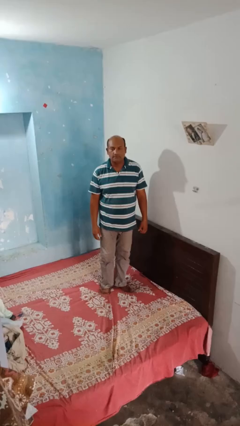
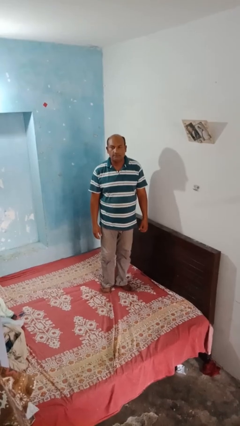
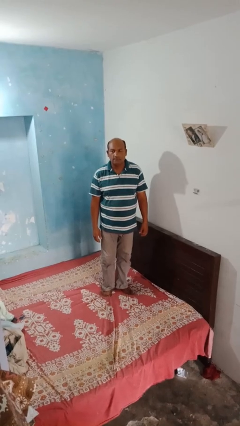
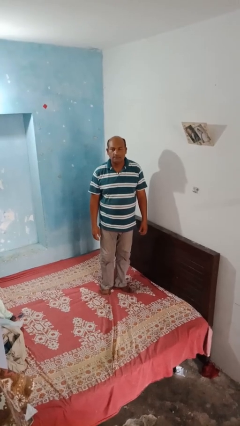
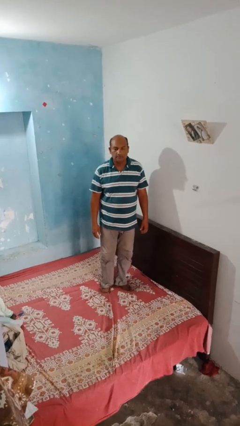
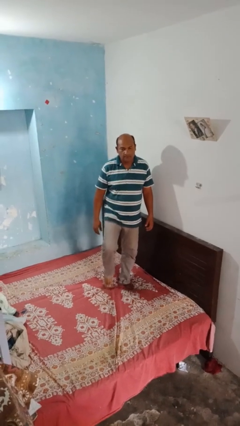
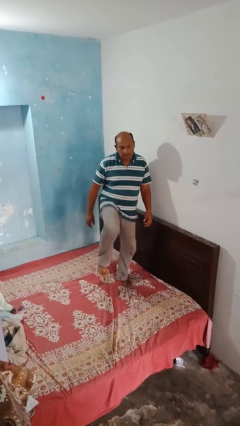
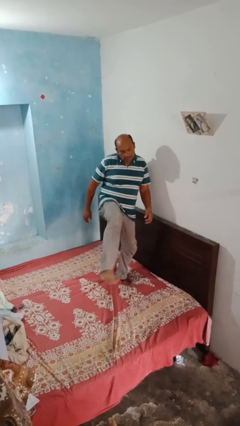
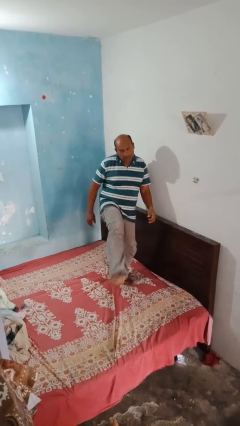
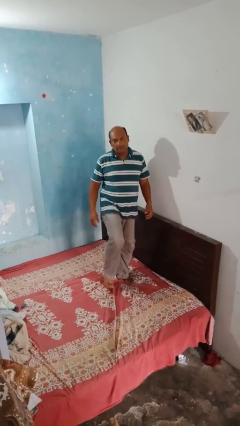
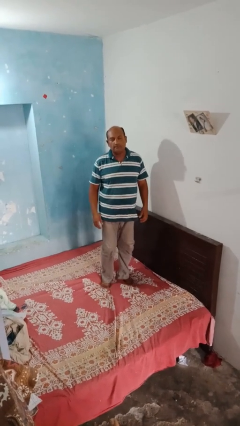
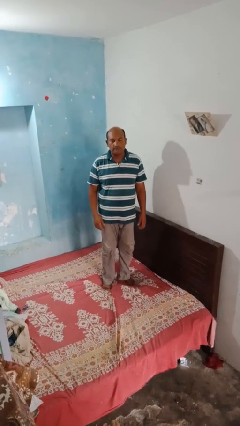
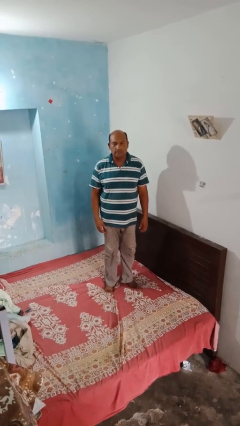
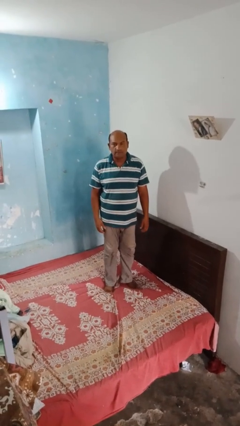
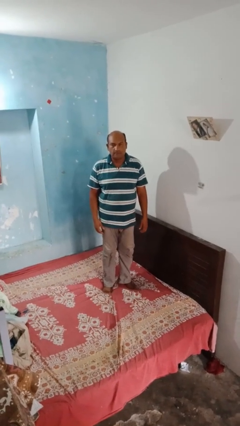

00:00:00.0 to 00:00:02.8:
person karate kicks

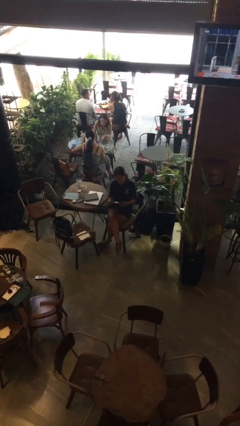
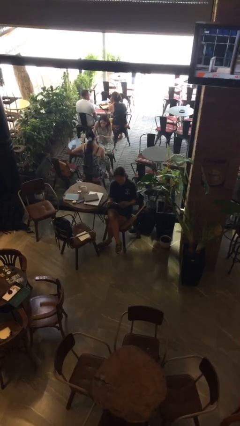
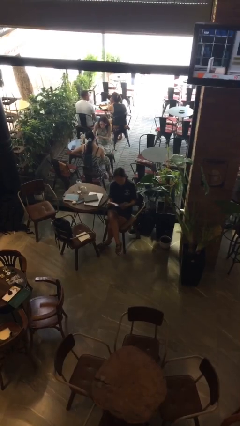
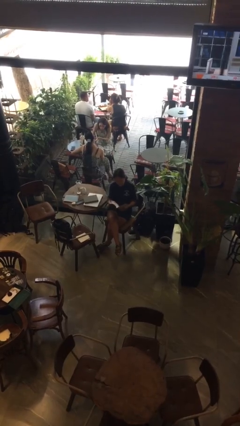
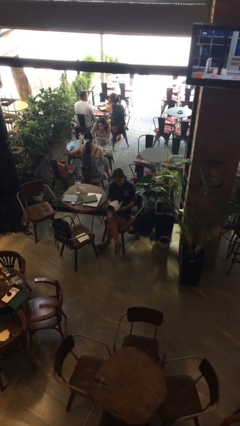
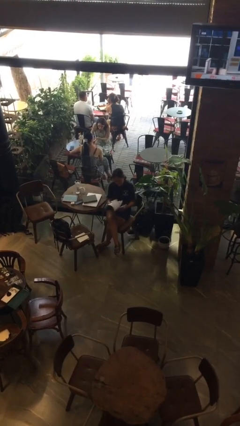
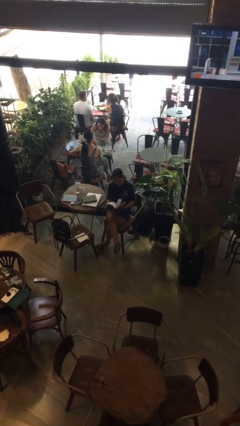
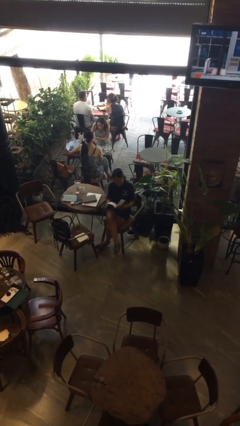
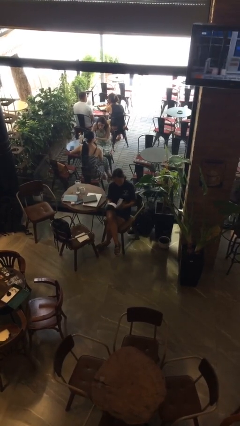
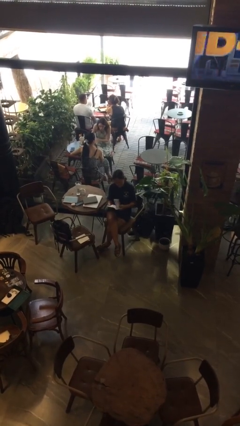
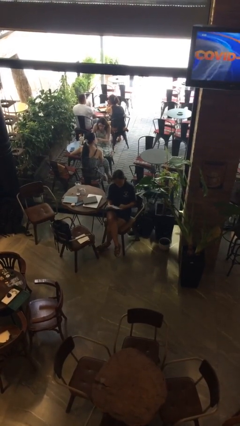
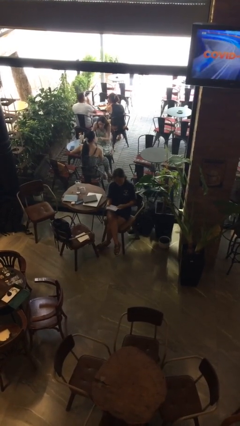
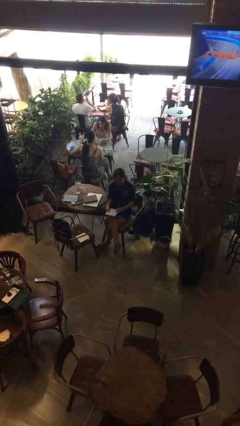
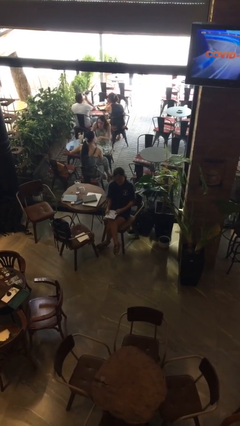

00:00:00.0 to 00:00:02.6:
person reads magazine

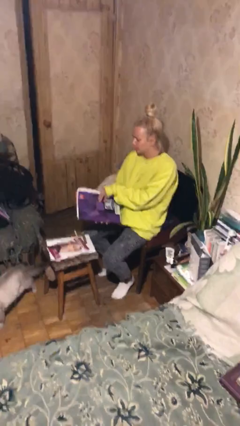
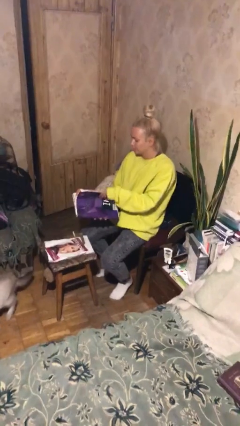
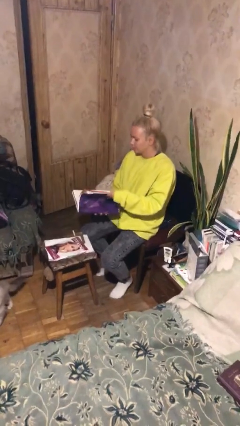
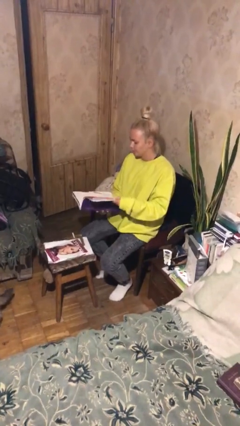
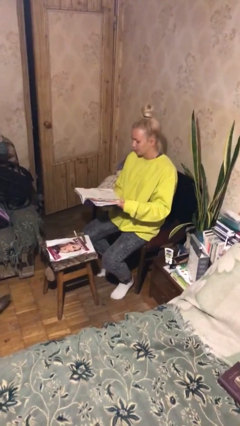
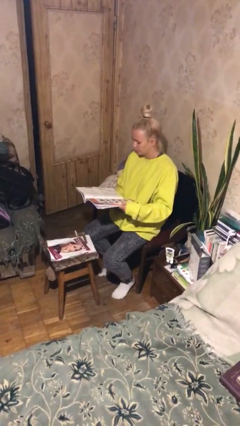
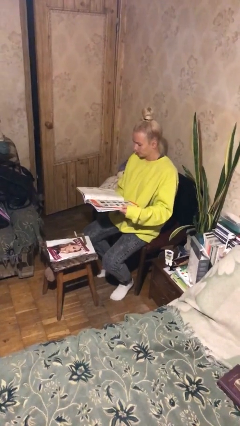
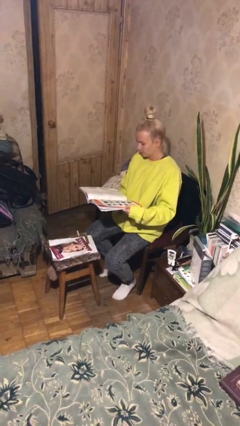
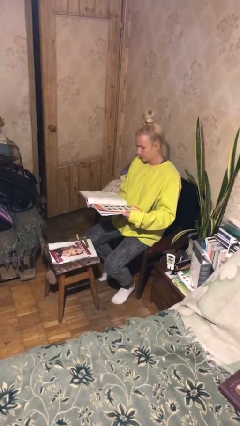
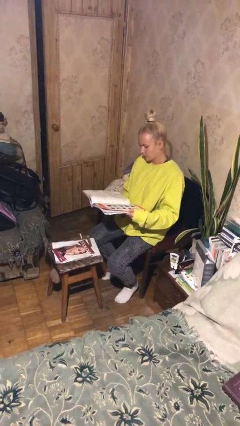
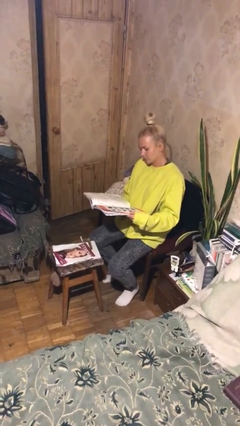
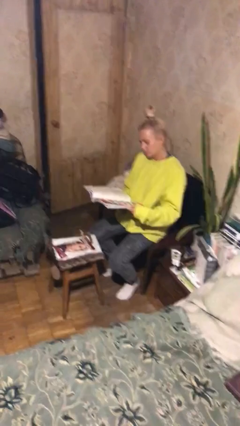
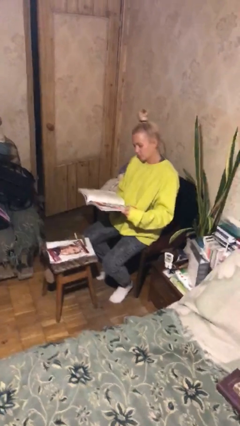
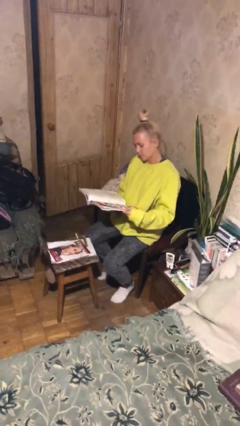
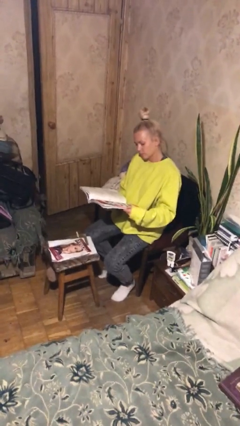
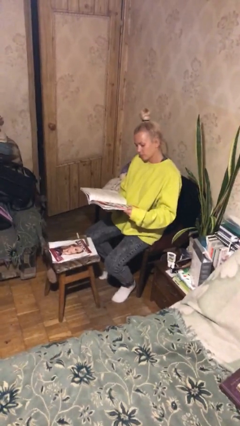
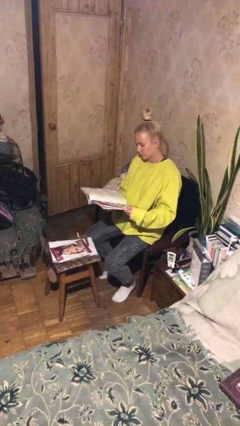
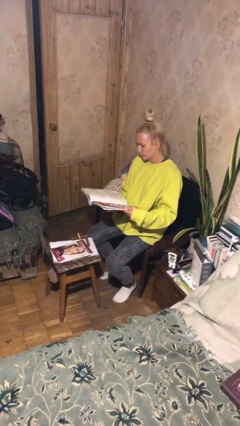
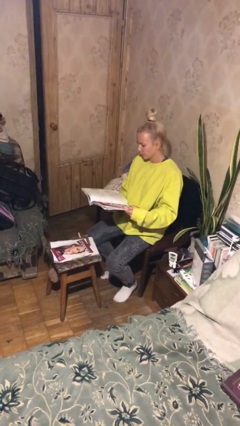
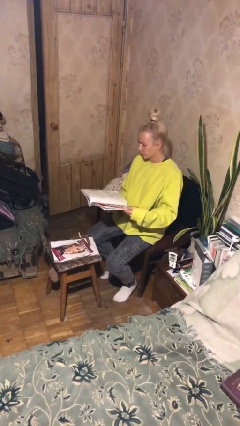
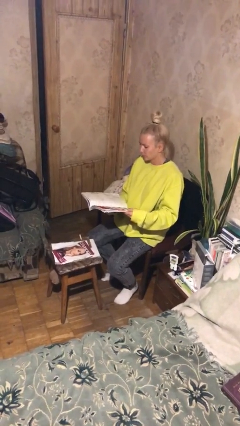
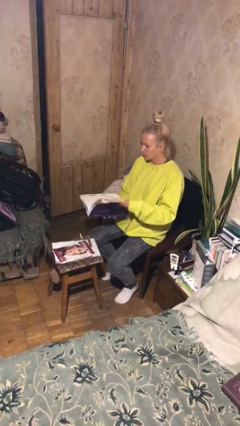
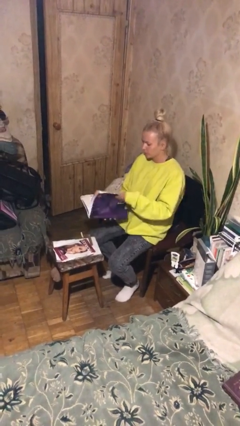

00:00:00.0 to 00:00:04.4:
person reads document

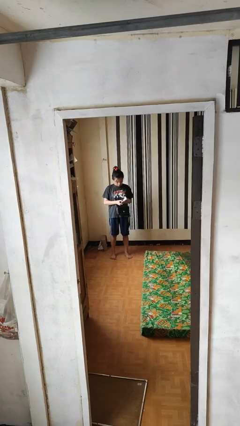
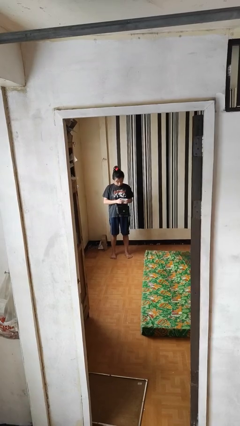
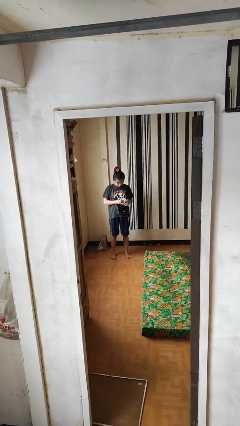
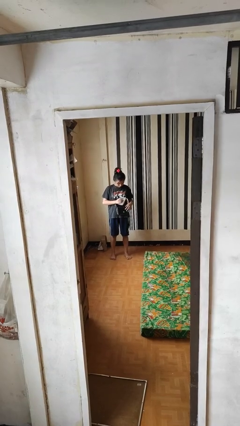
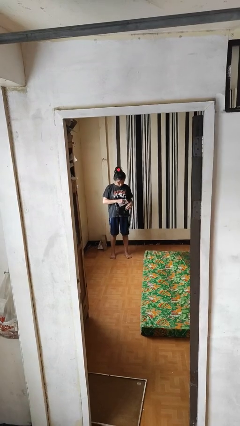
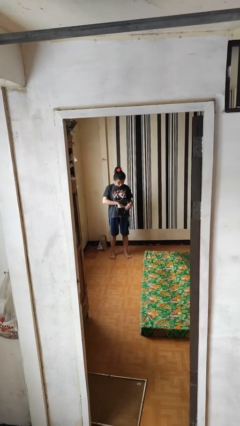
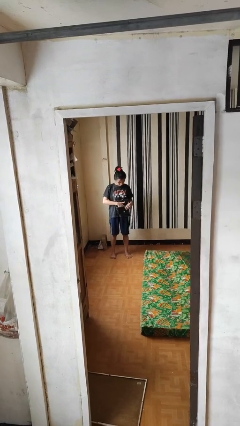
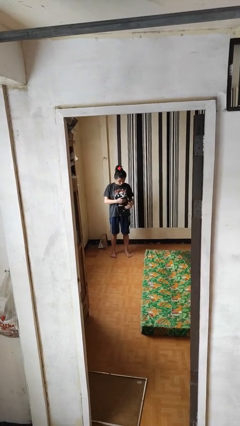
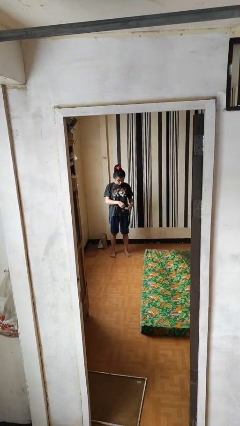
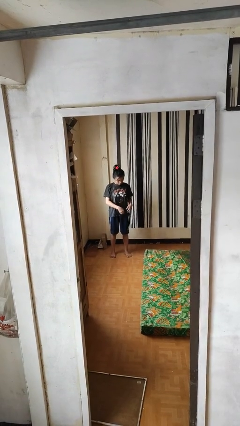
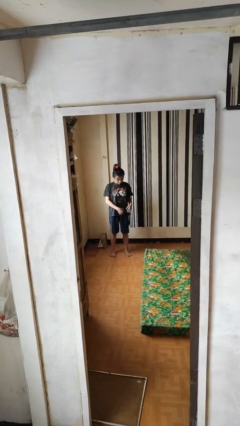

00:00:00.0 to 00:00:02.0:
person puts object into purse

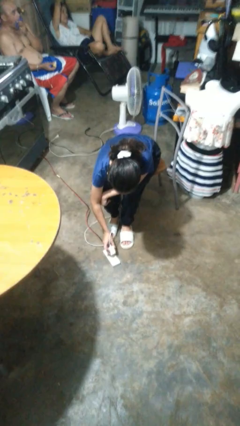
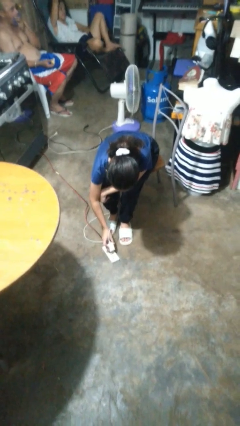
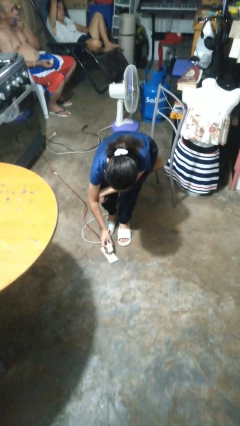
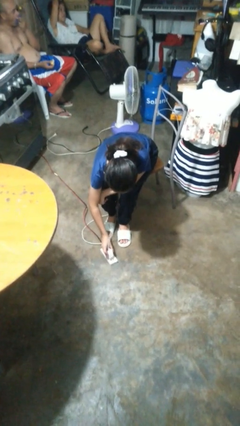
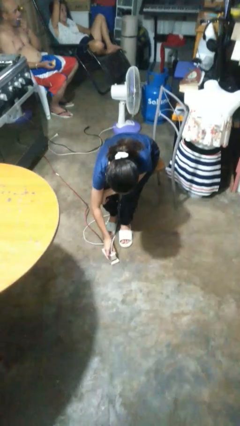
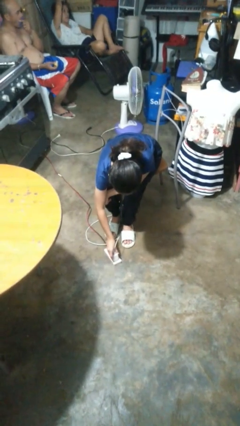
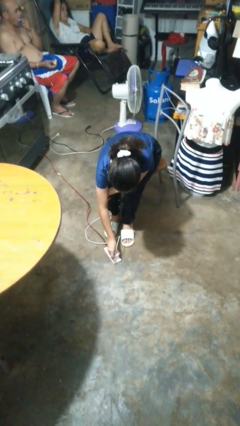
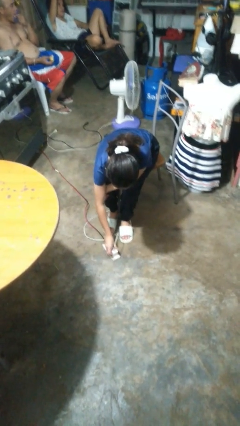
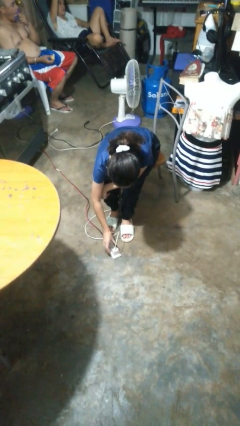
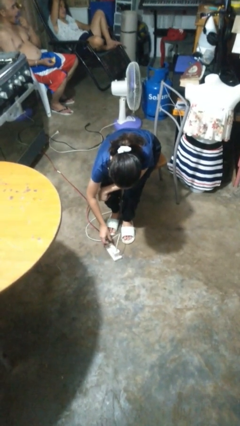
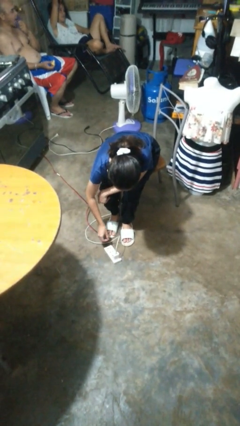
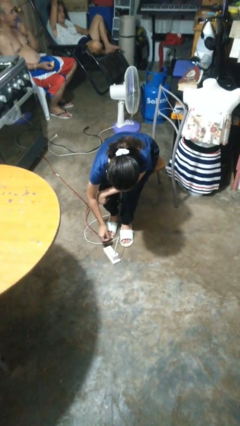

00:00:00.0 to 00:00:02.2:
person plugs into electrical socket

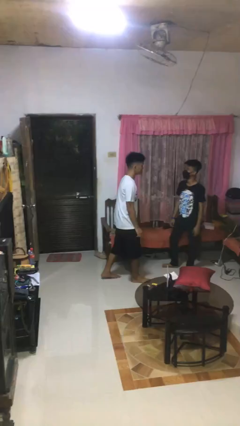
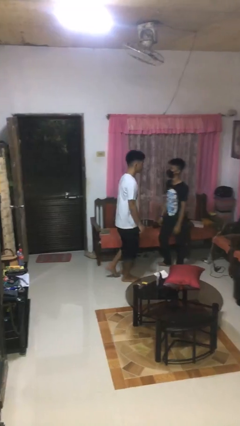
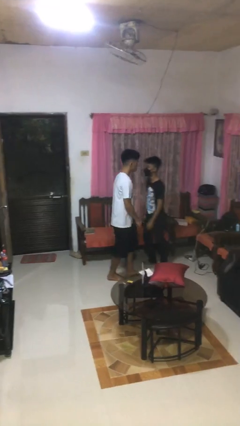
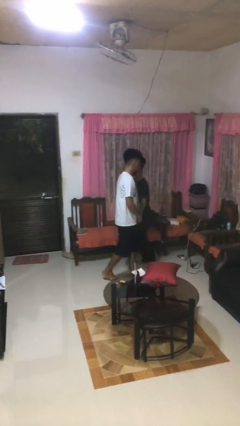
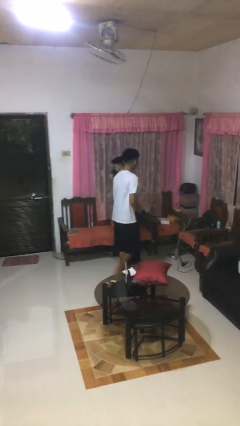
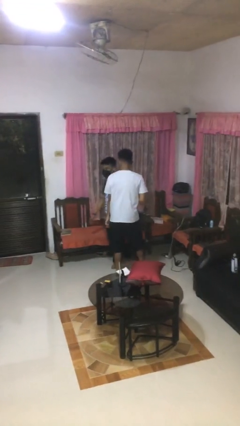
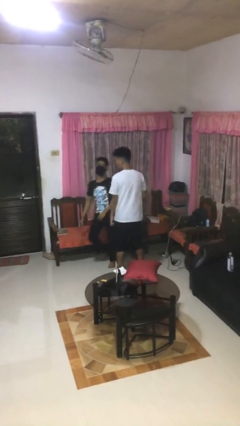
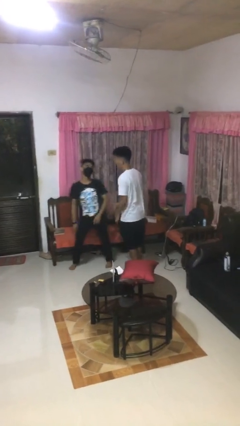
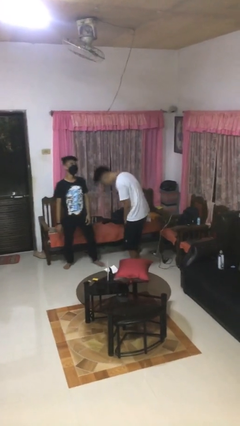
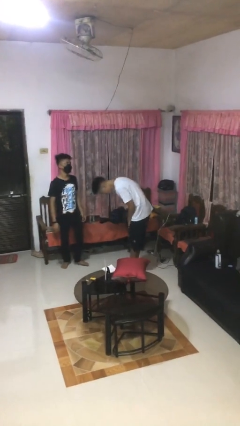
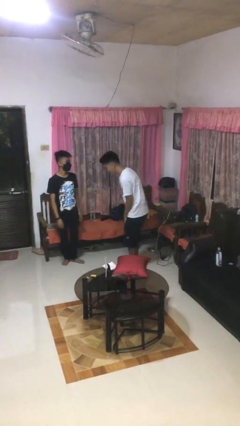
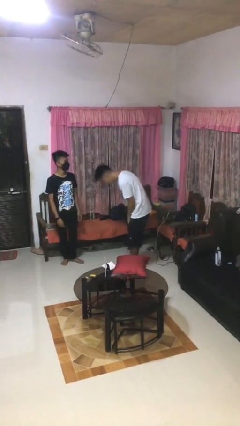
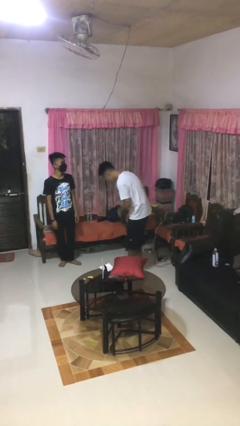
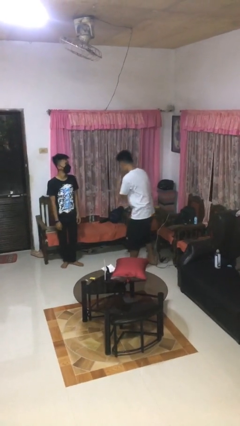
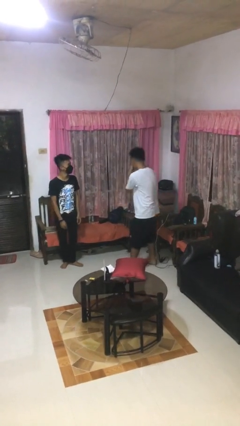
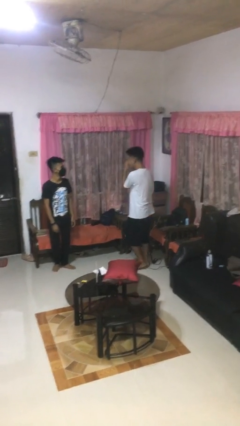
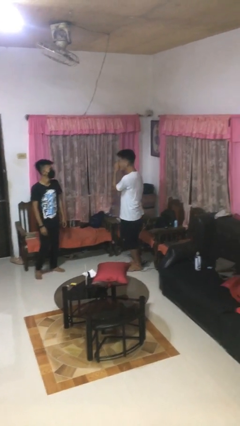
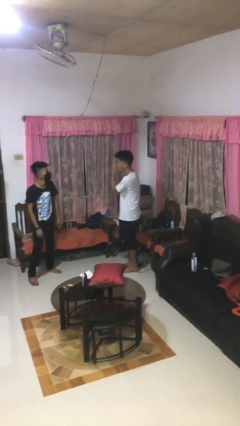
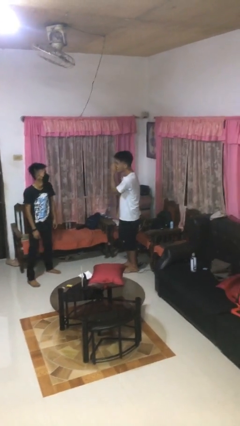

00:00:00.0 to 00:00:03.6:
person bumps into person
